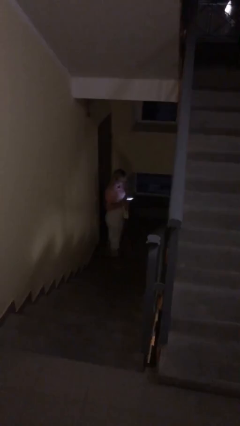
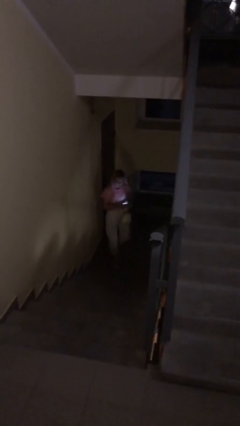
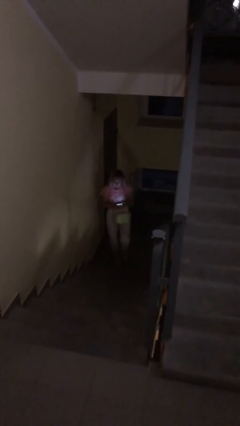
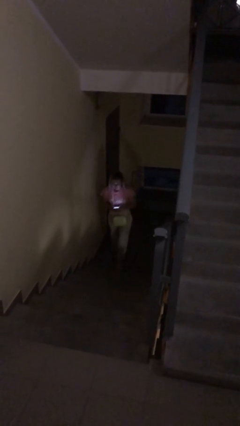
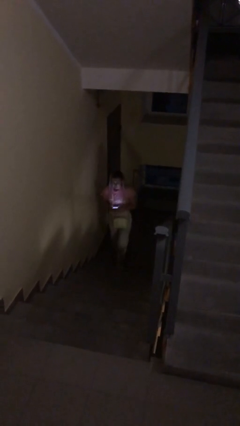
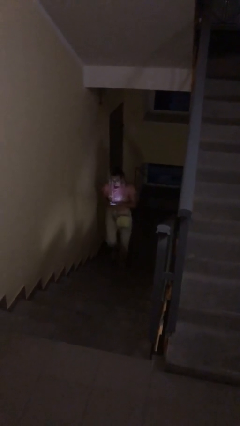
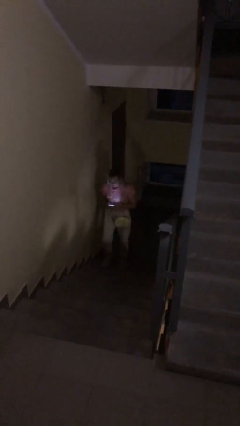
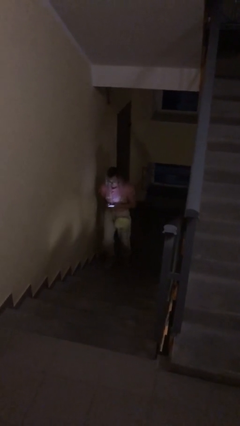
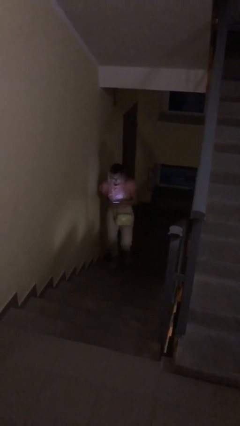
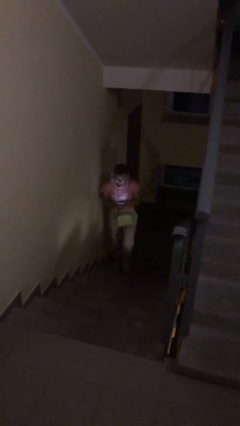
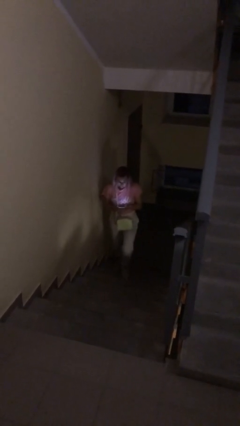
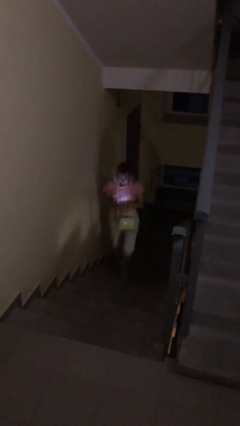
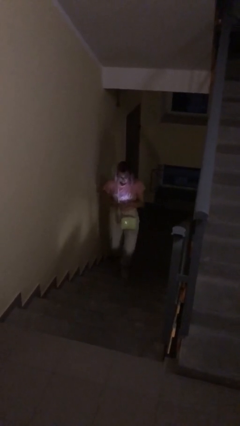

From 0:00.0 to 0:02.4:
person climbs up stairs

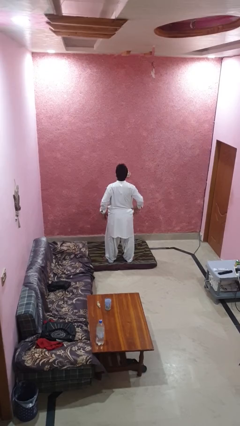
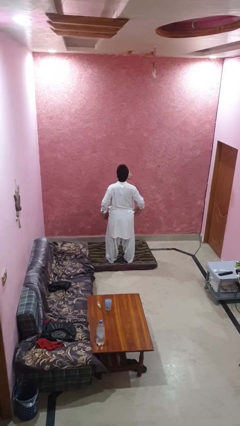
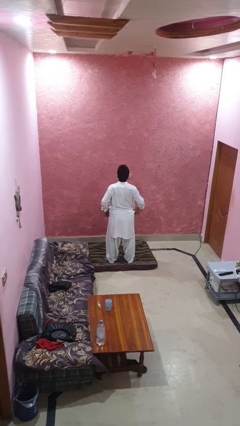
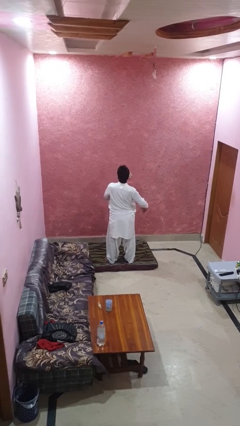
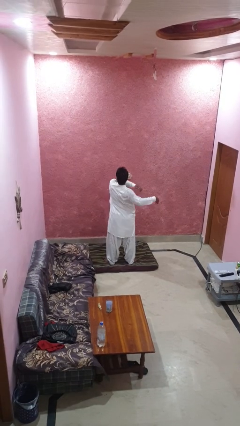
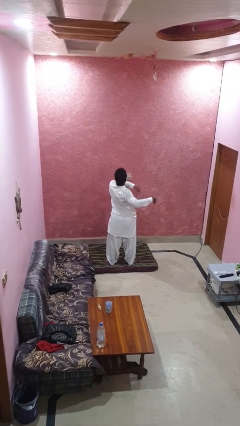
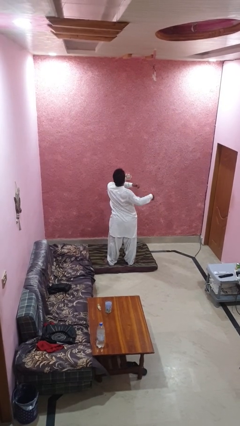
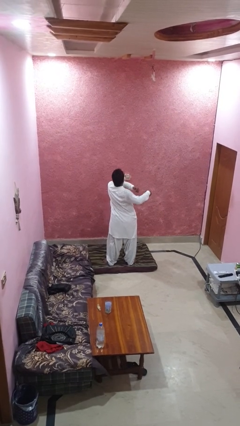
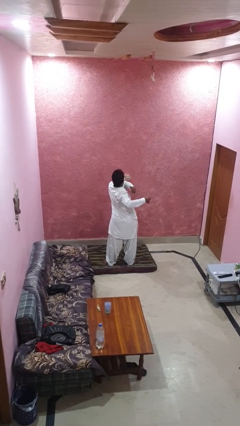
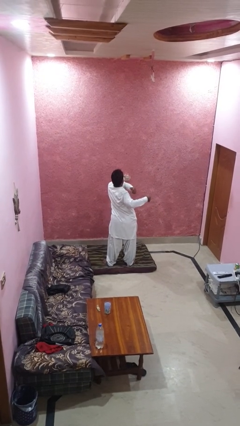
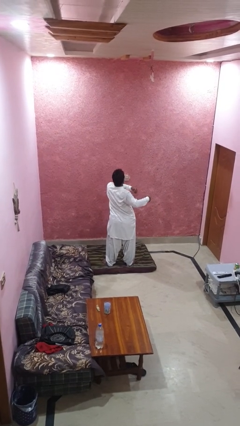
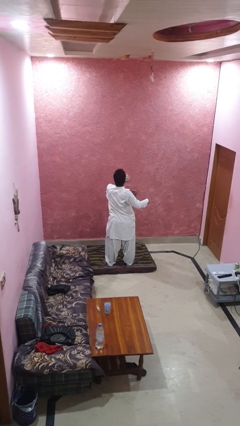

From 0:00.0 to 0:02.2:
person stretches arms to side

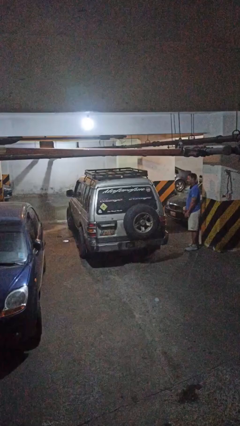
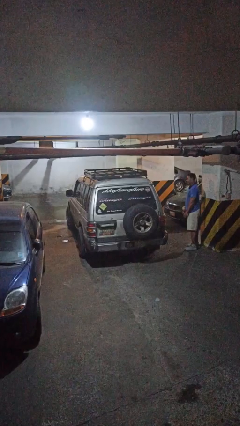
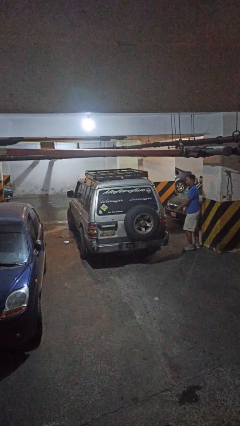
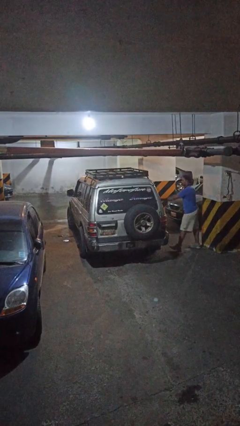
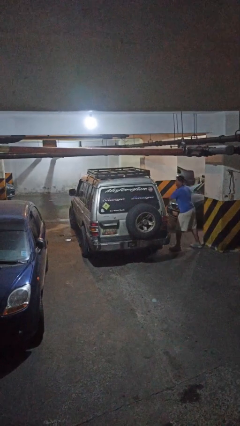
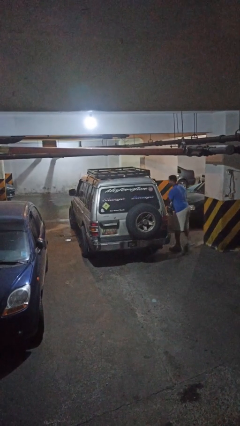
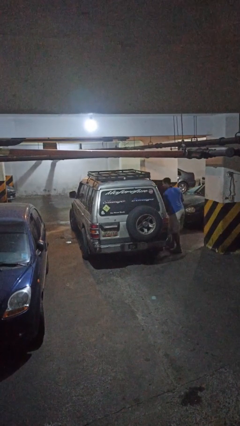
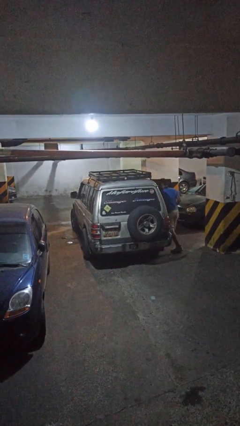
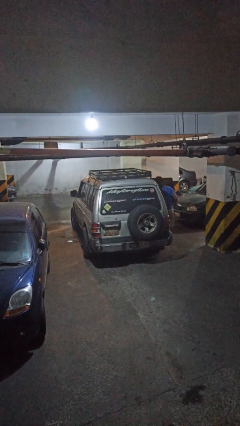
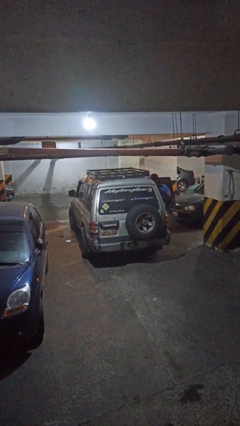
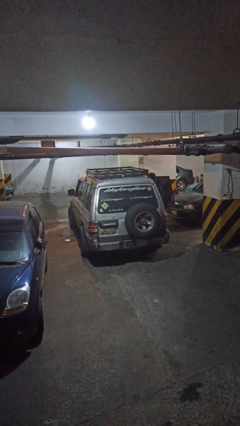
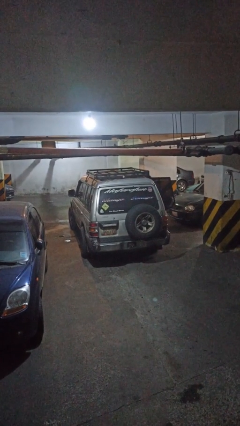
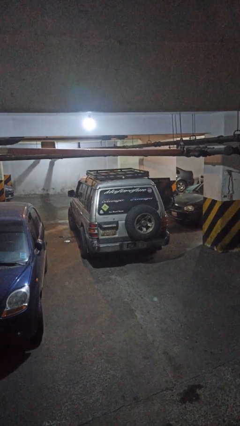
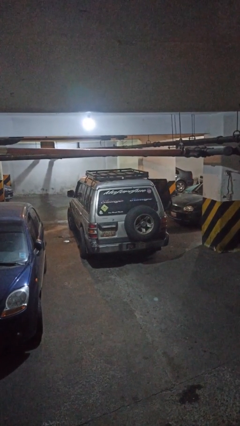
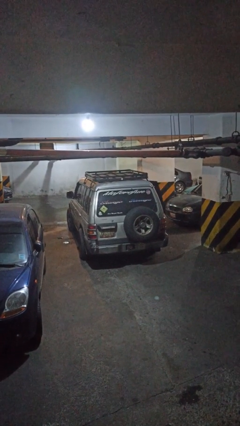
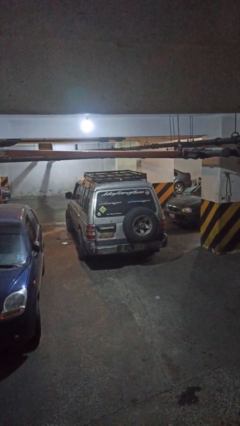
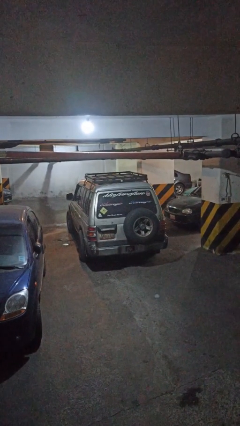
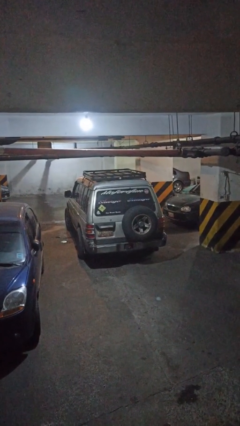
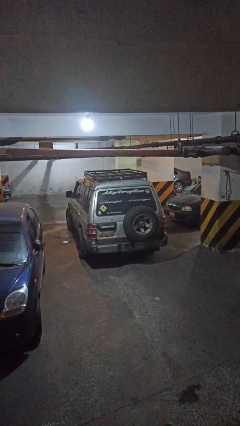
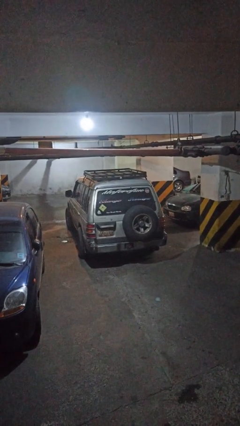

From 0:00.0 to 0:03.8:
car picks up person

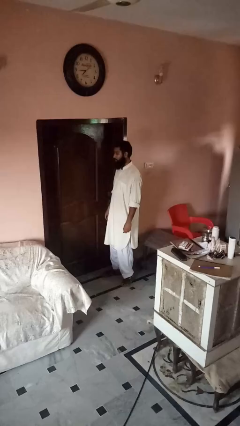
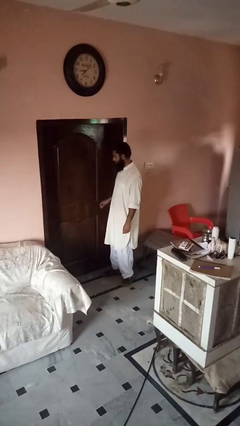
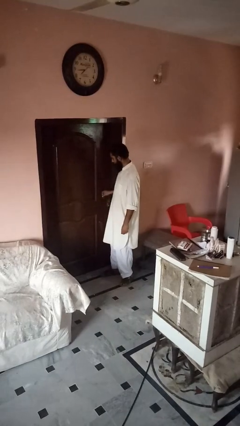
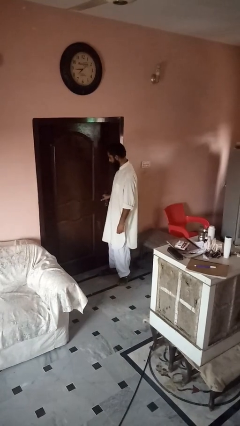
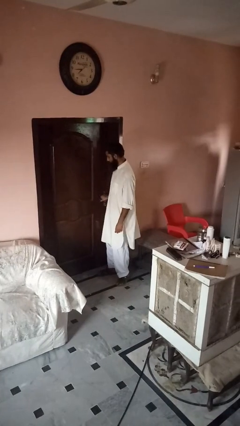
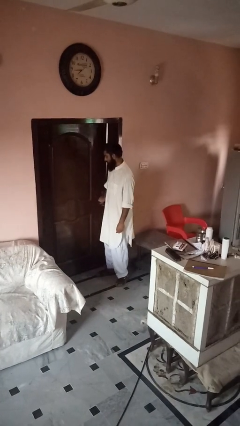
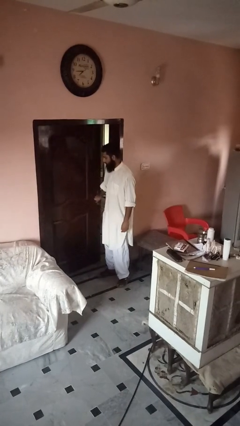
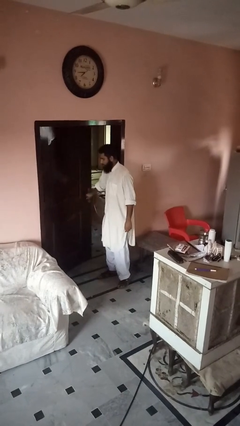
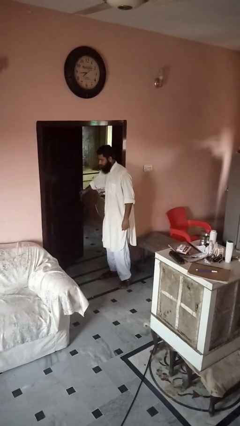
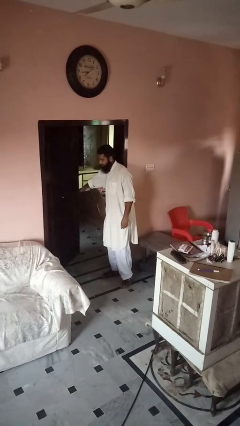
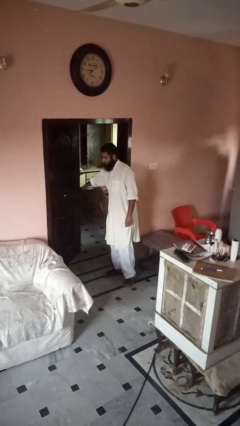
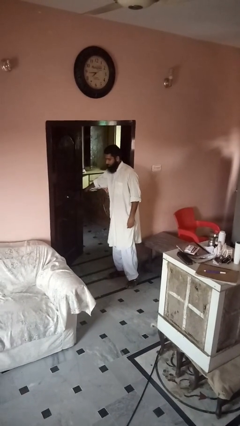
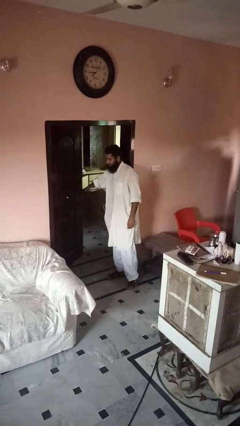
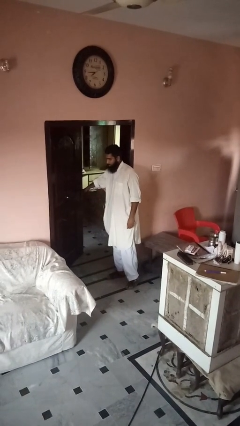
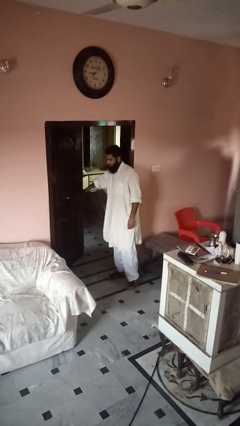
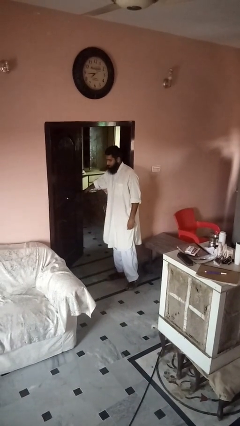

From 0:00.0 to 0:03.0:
person opens gate

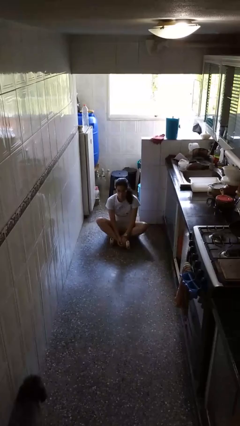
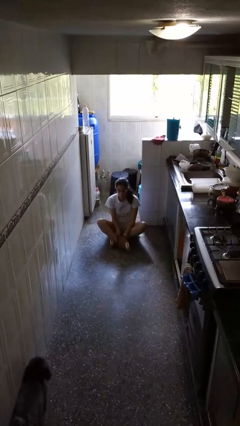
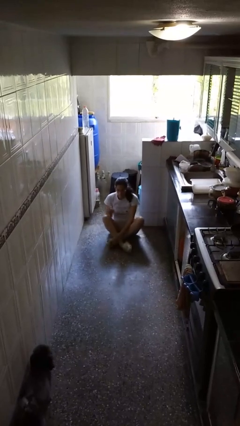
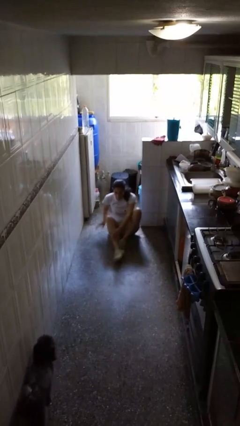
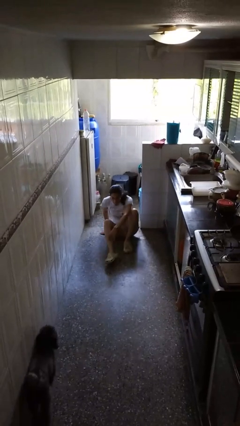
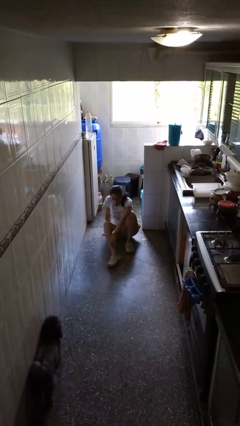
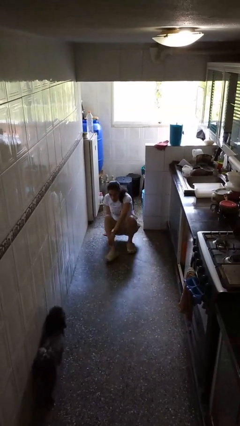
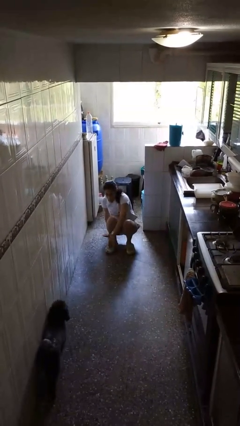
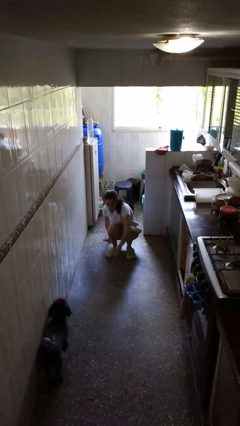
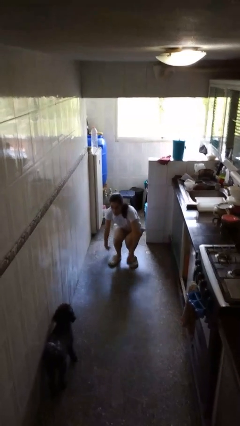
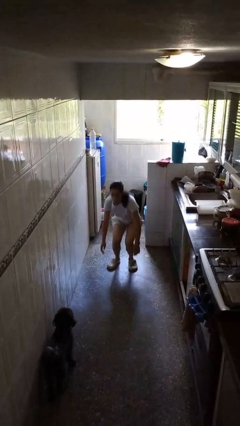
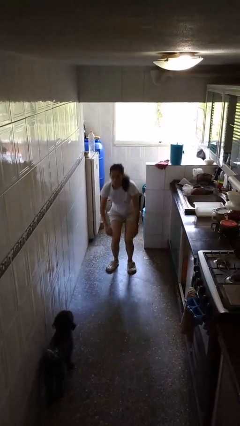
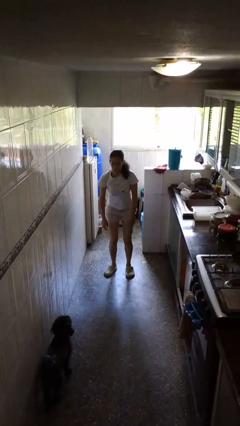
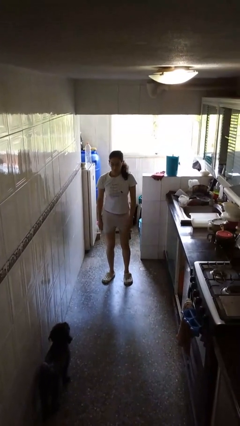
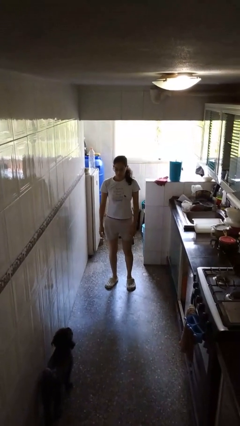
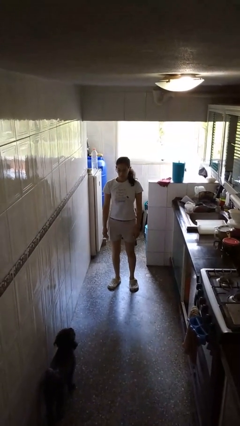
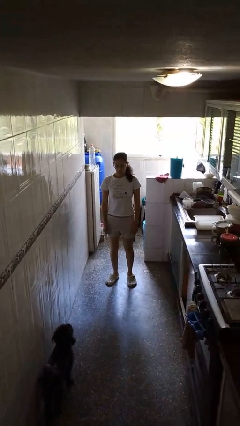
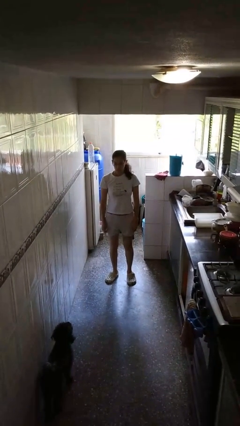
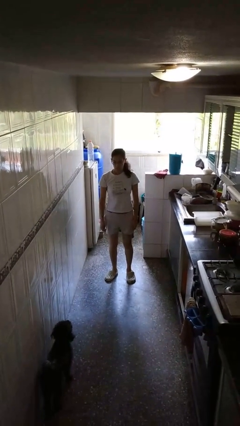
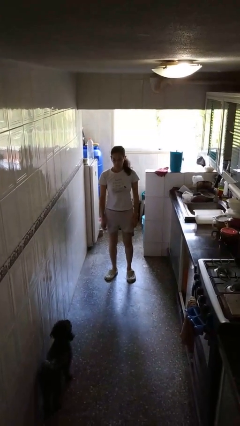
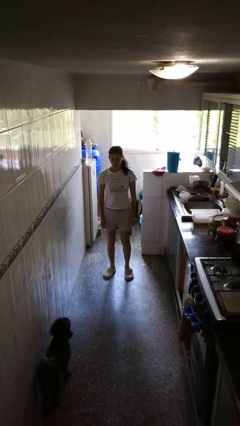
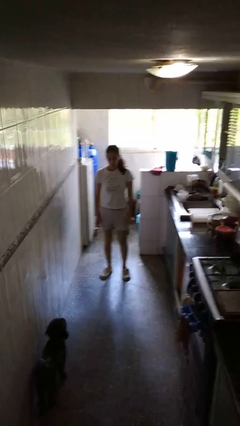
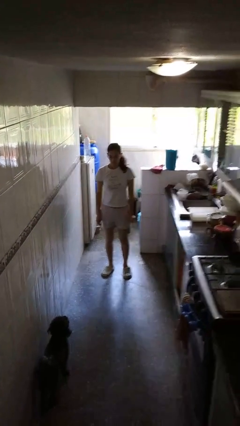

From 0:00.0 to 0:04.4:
person stands up from floor

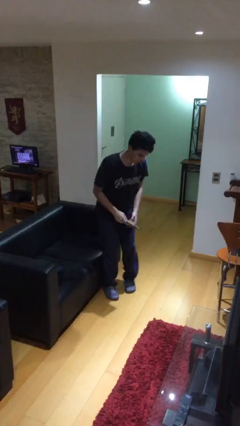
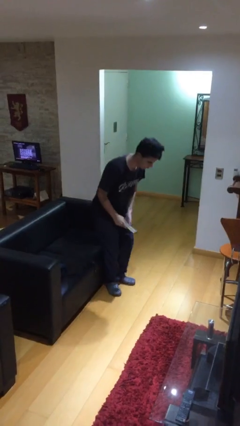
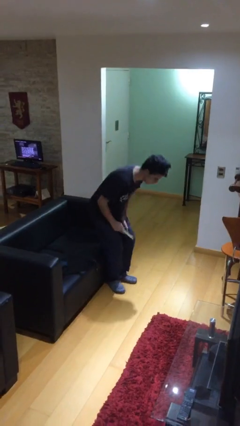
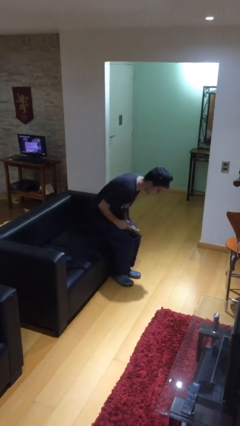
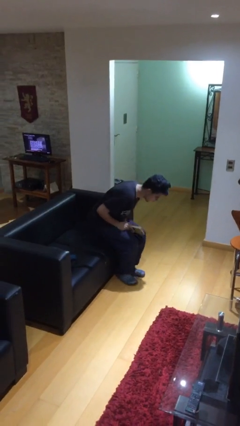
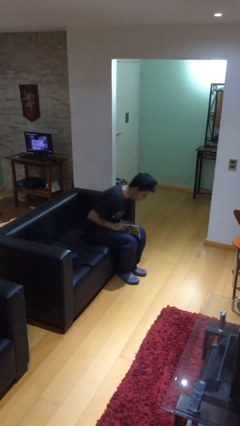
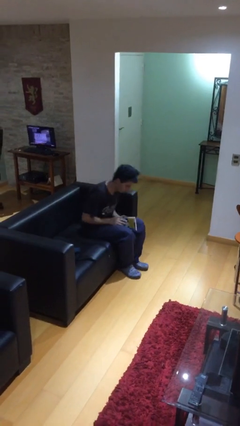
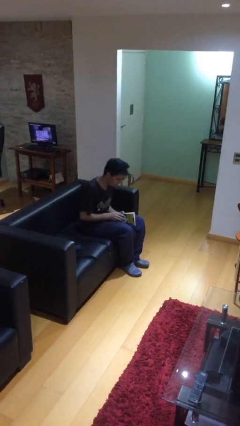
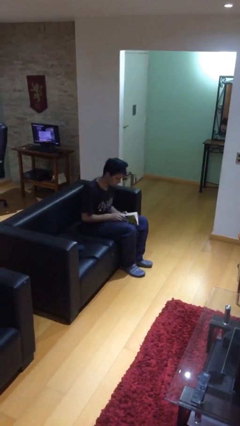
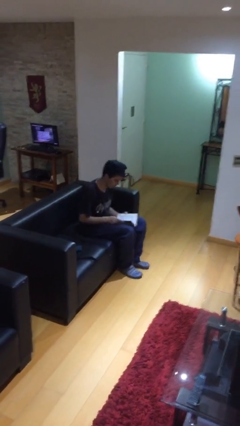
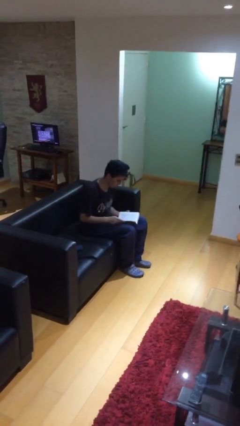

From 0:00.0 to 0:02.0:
person sits down
